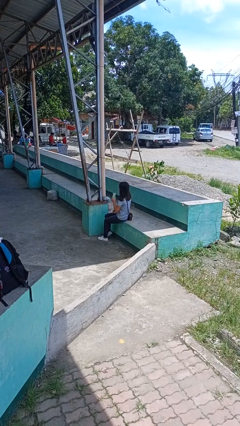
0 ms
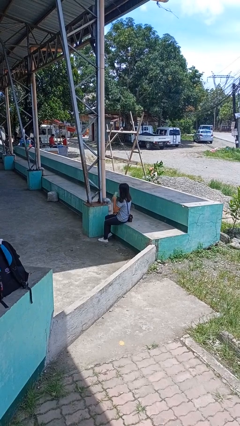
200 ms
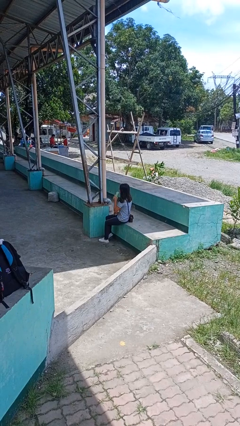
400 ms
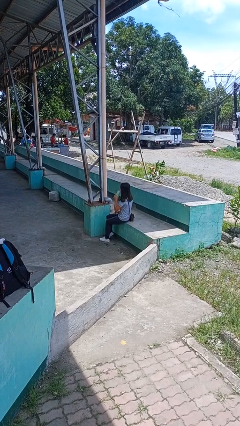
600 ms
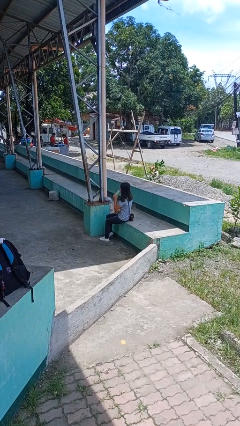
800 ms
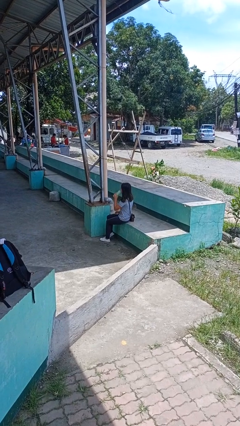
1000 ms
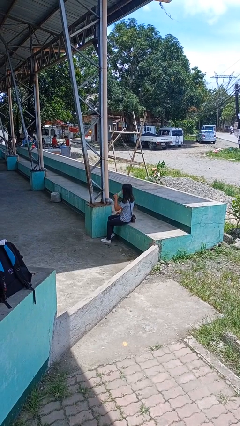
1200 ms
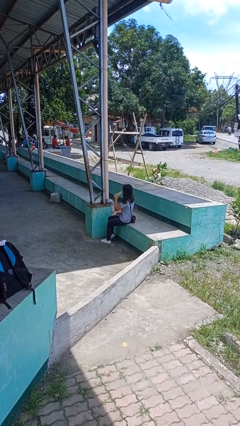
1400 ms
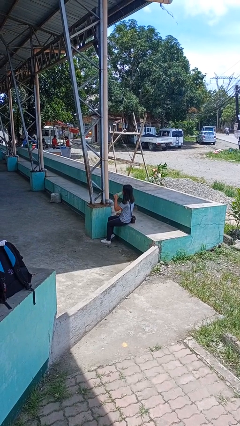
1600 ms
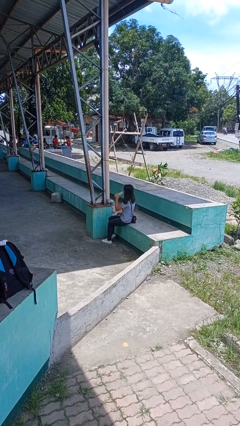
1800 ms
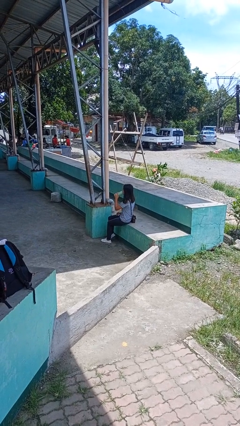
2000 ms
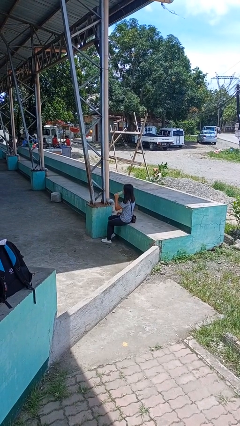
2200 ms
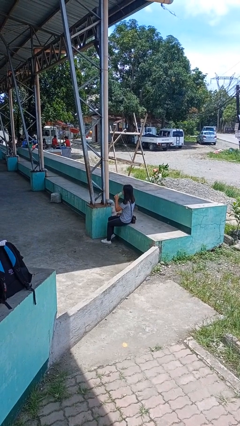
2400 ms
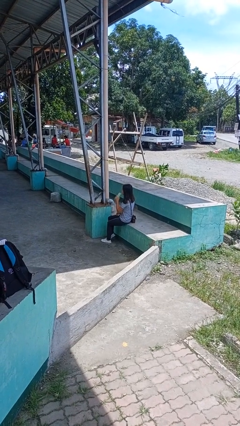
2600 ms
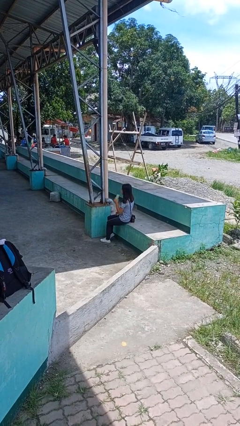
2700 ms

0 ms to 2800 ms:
person drinks from bottle

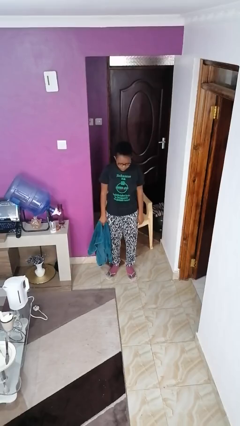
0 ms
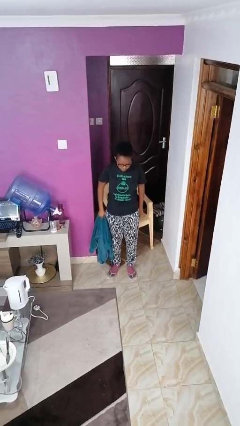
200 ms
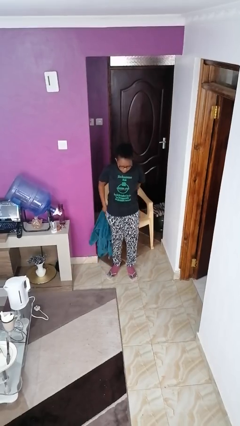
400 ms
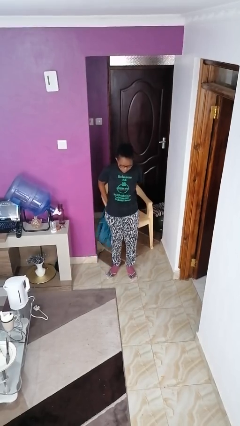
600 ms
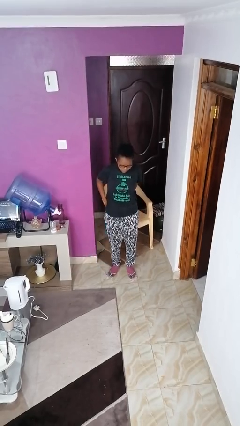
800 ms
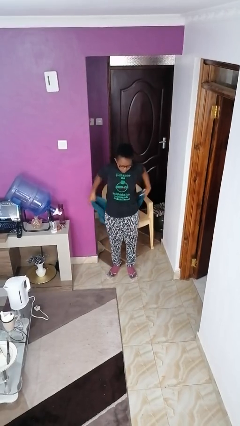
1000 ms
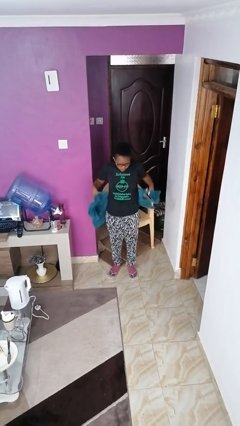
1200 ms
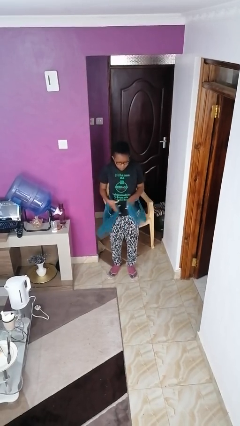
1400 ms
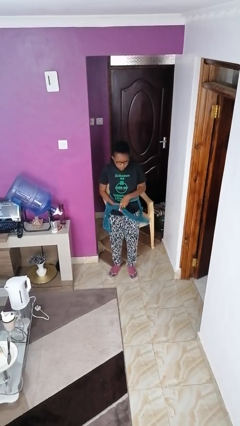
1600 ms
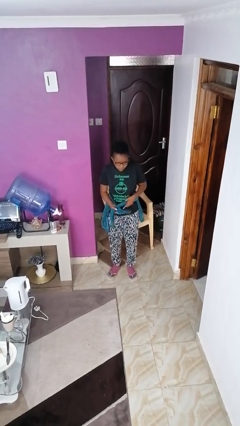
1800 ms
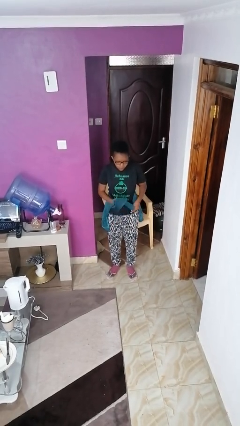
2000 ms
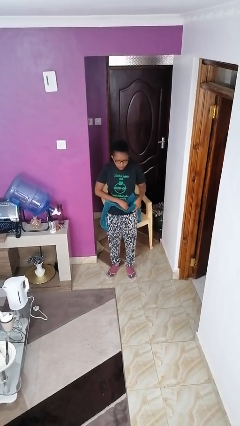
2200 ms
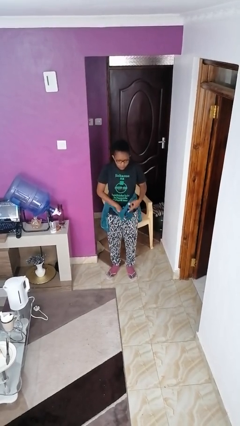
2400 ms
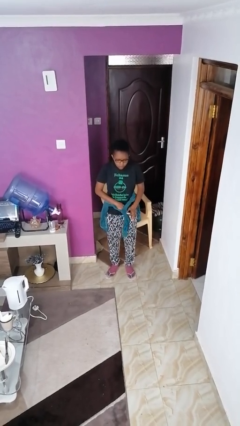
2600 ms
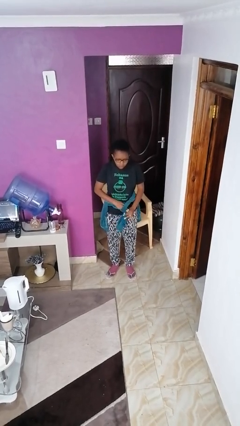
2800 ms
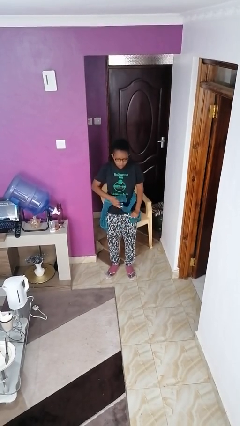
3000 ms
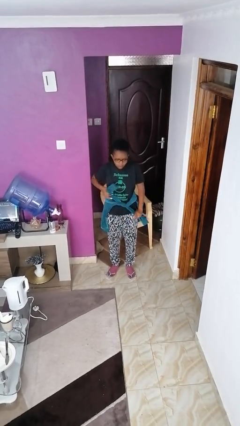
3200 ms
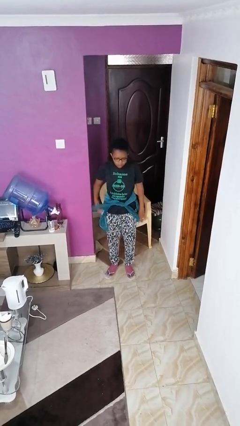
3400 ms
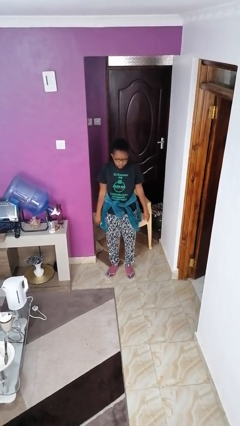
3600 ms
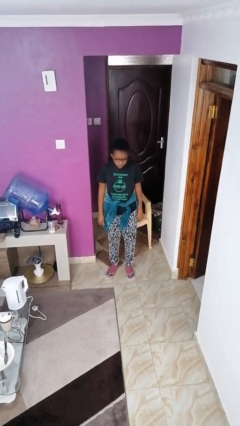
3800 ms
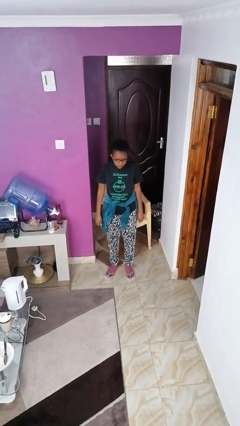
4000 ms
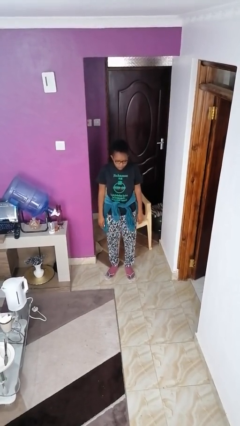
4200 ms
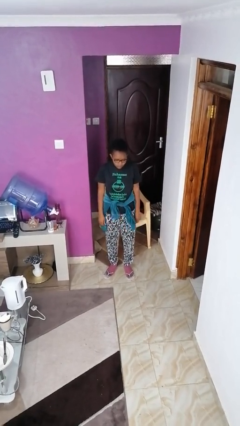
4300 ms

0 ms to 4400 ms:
person ties jacket around waist

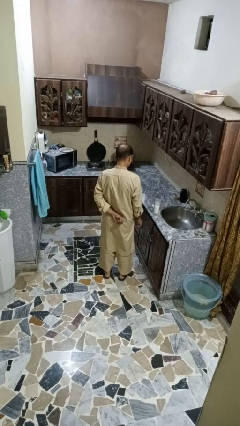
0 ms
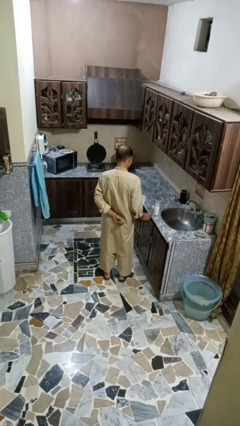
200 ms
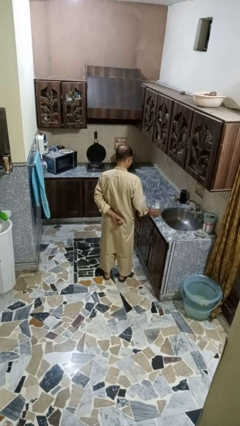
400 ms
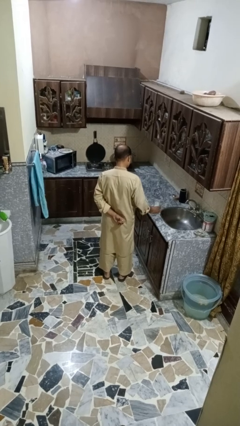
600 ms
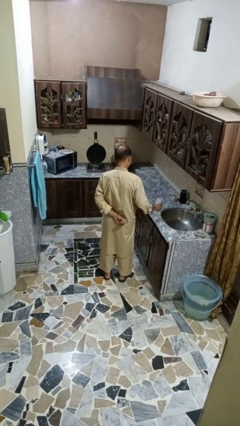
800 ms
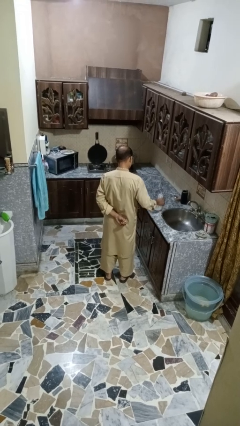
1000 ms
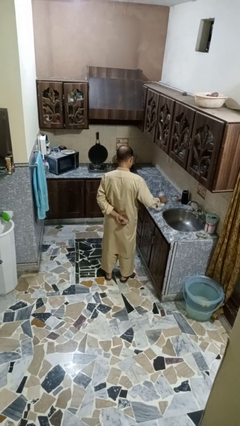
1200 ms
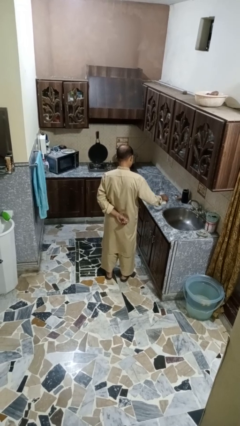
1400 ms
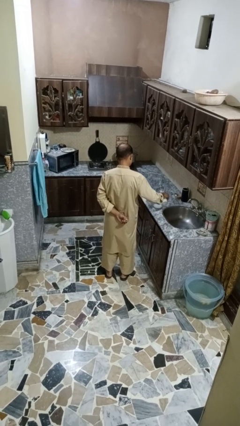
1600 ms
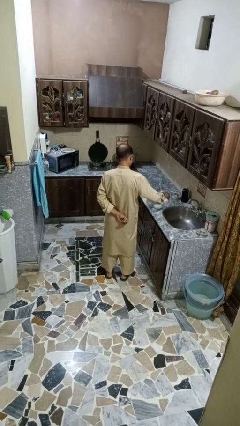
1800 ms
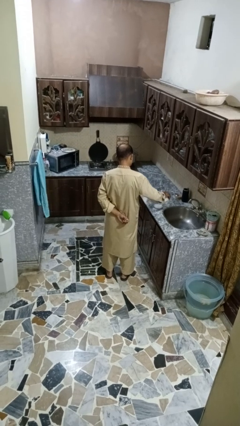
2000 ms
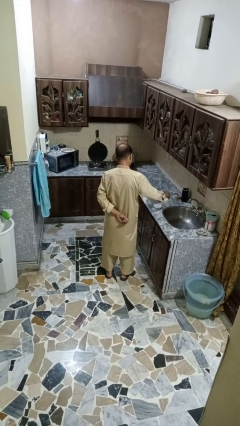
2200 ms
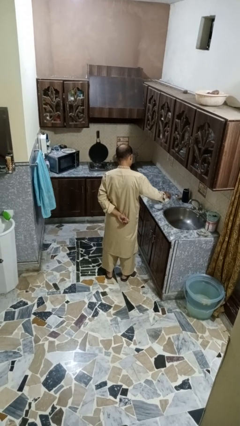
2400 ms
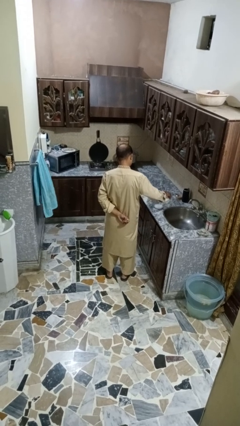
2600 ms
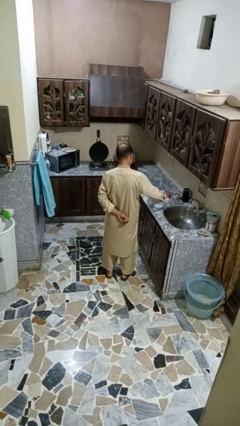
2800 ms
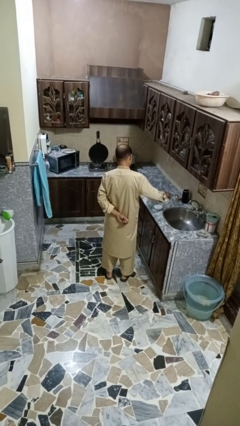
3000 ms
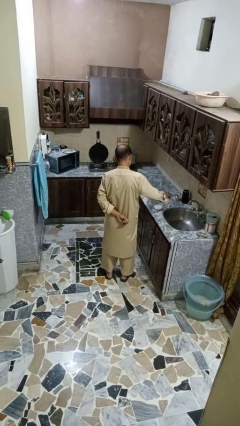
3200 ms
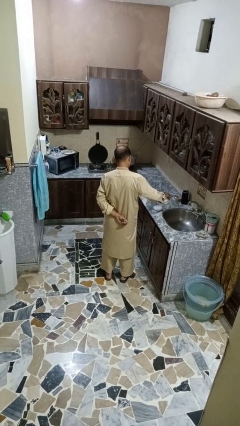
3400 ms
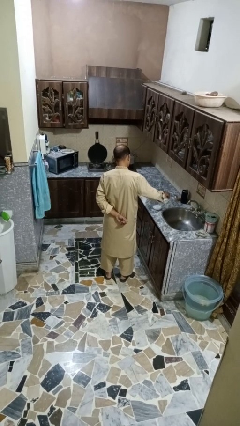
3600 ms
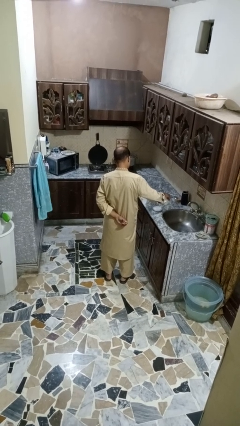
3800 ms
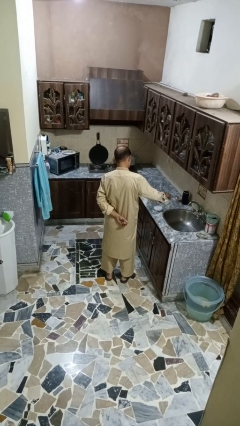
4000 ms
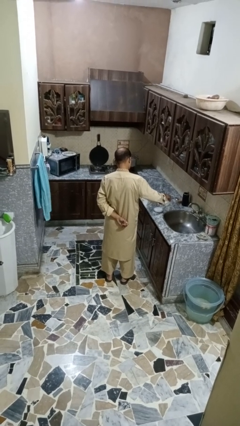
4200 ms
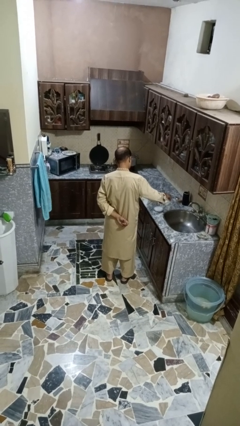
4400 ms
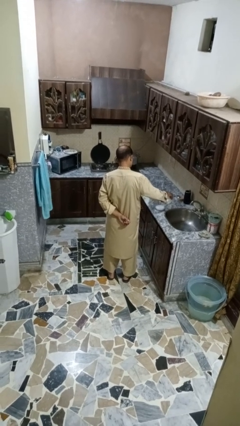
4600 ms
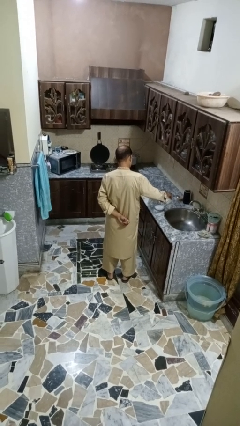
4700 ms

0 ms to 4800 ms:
person pours into bowl

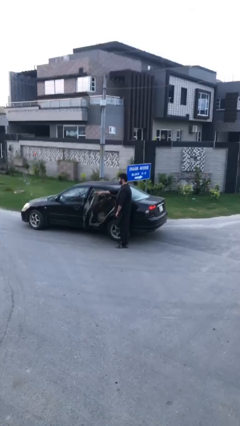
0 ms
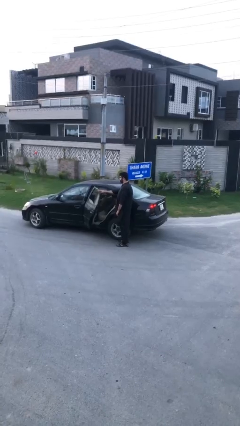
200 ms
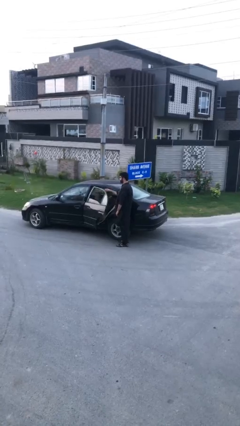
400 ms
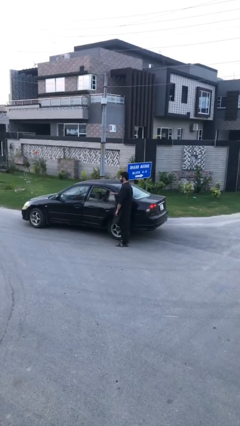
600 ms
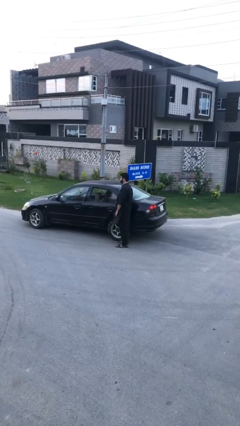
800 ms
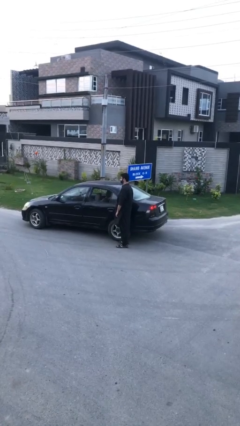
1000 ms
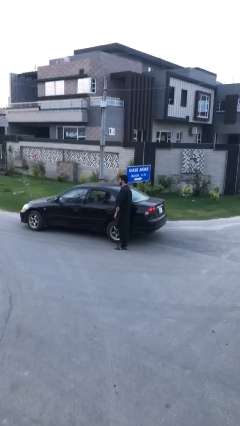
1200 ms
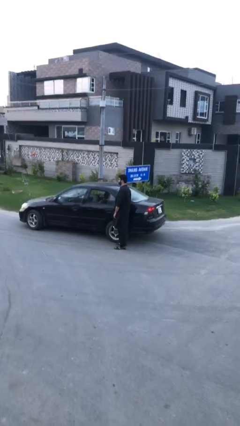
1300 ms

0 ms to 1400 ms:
person closes car door

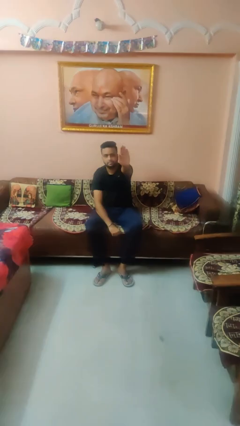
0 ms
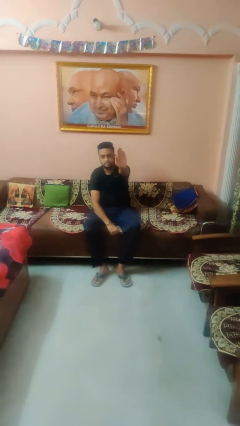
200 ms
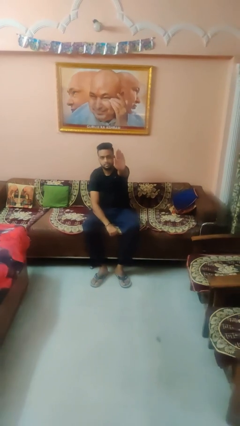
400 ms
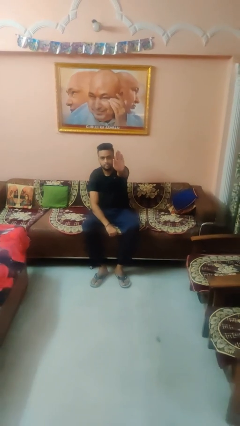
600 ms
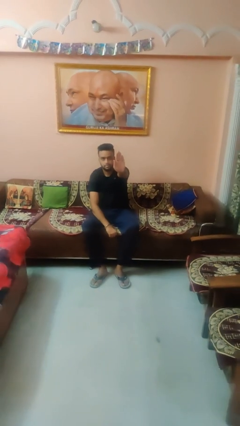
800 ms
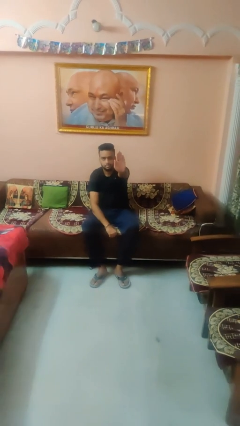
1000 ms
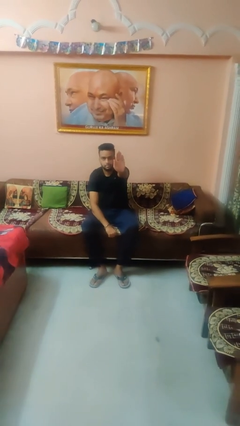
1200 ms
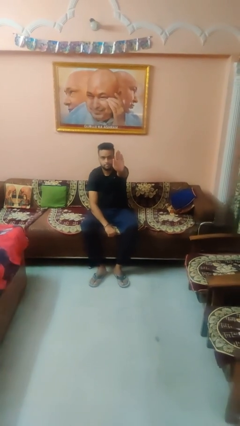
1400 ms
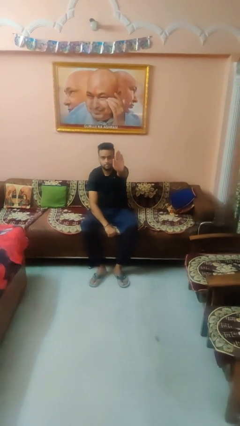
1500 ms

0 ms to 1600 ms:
person gestures stop

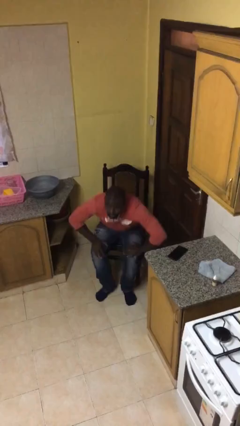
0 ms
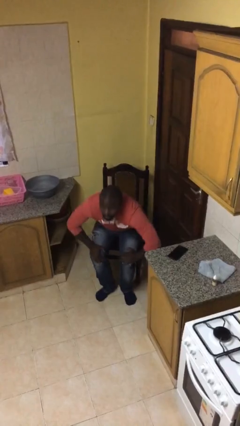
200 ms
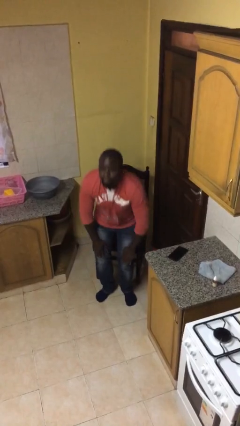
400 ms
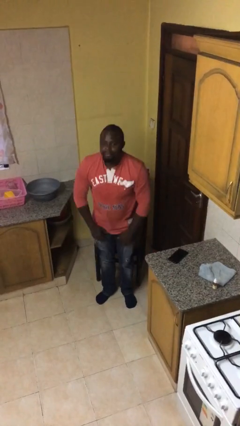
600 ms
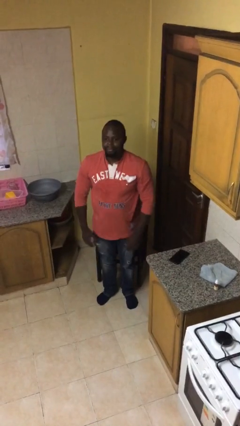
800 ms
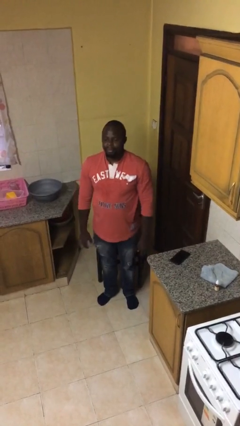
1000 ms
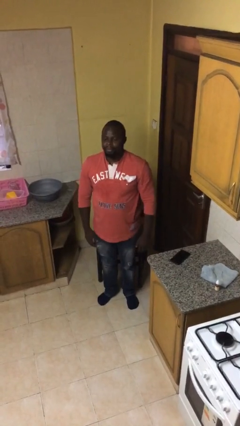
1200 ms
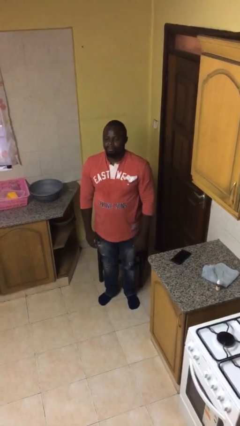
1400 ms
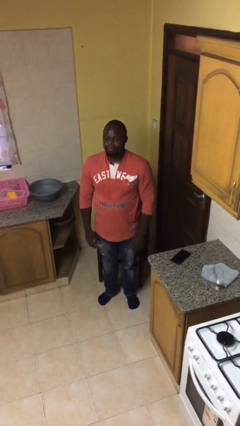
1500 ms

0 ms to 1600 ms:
person stands up

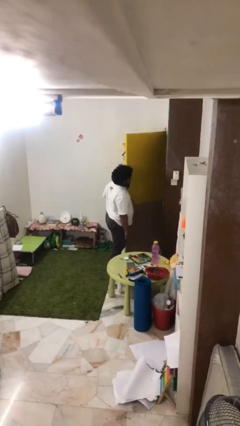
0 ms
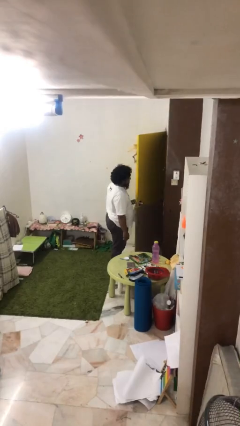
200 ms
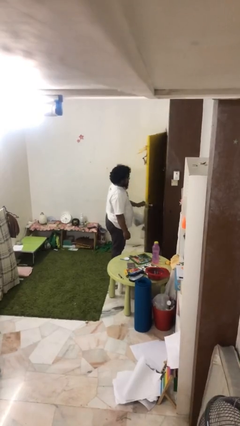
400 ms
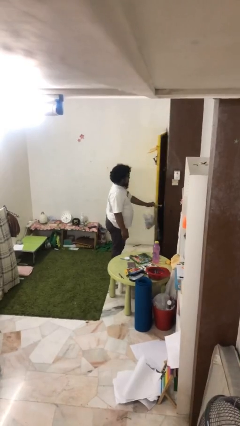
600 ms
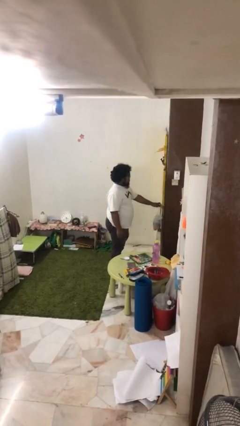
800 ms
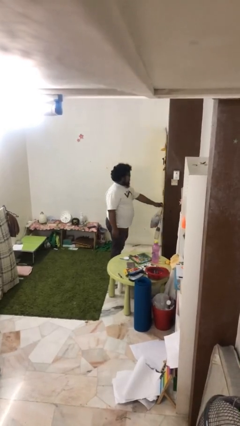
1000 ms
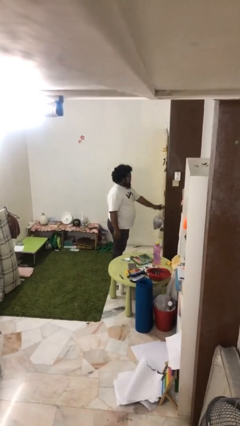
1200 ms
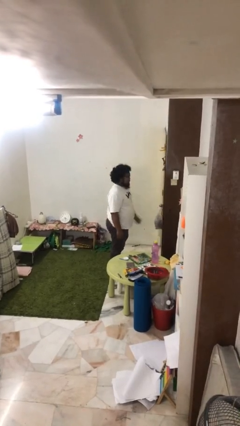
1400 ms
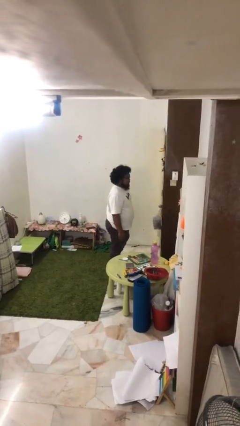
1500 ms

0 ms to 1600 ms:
person closes facility door
